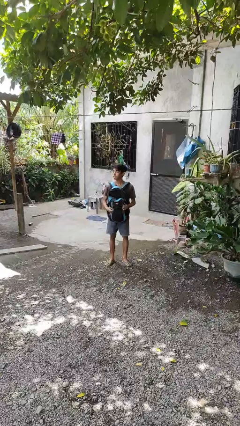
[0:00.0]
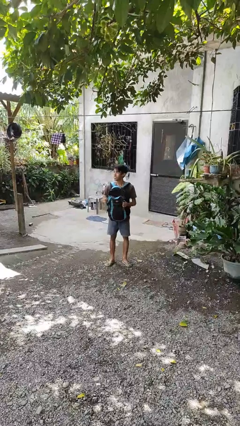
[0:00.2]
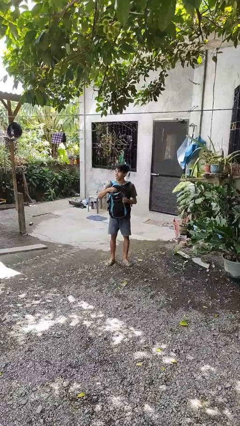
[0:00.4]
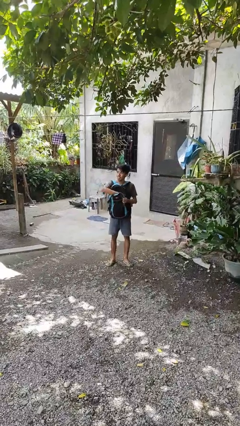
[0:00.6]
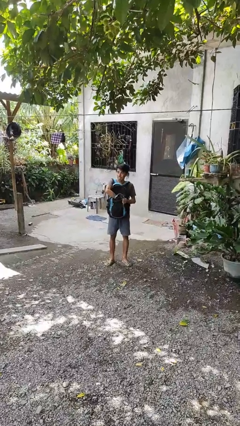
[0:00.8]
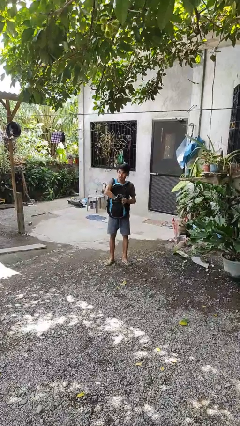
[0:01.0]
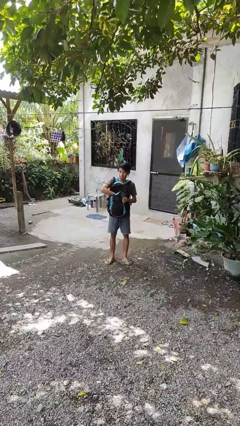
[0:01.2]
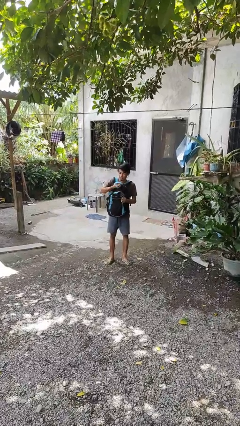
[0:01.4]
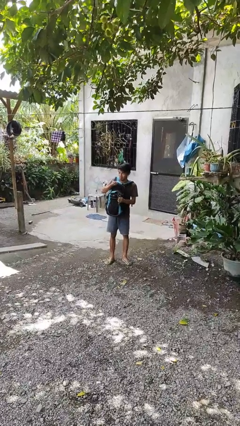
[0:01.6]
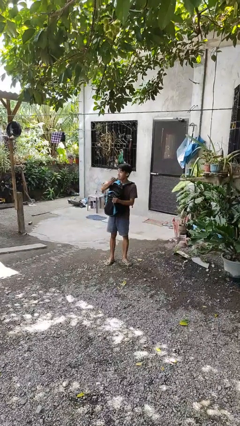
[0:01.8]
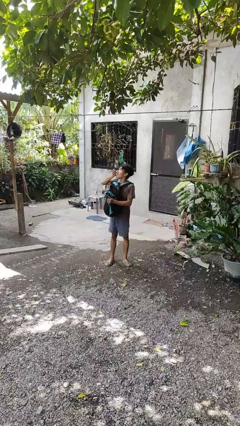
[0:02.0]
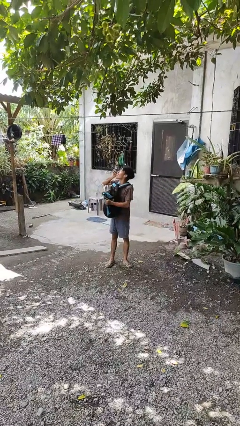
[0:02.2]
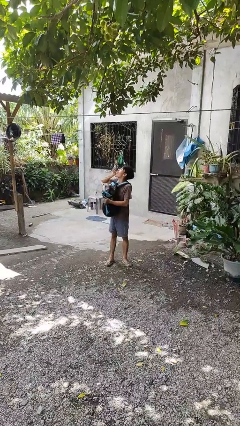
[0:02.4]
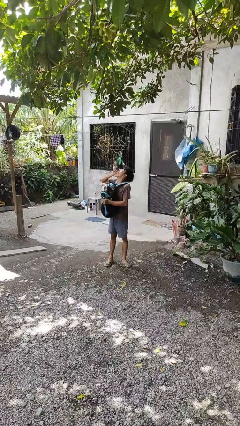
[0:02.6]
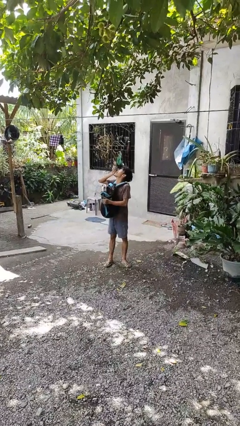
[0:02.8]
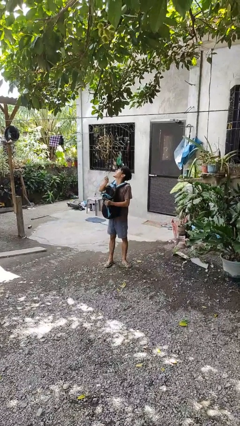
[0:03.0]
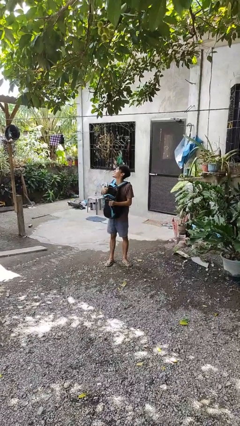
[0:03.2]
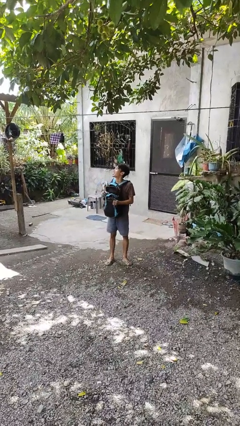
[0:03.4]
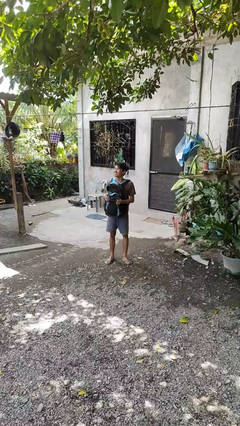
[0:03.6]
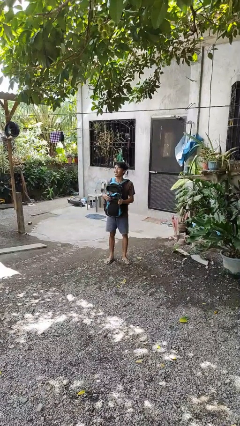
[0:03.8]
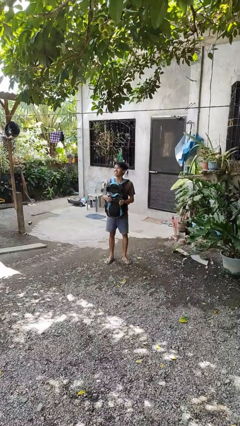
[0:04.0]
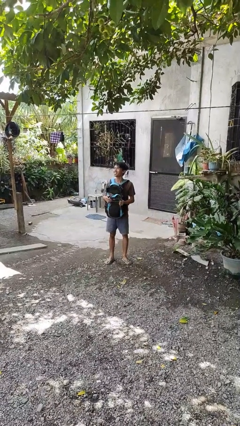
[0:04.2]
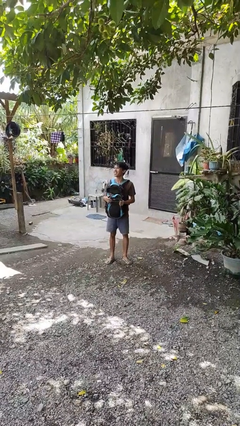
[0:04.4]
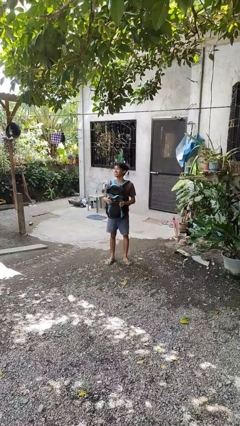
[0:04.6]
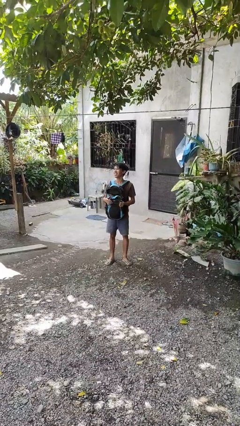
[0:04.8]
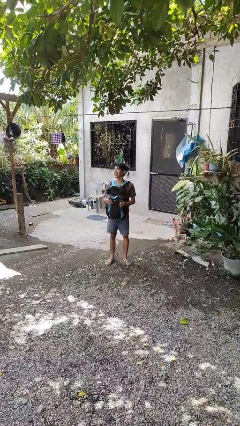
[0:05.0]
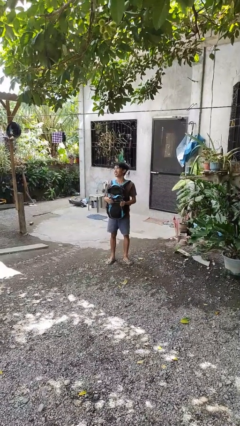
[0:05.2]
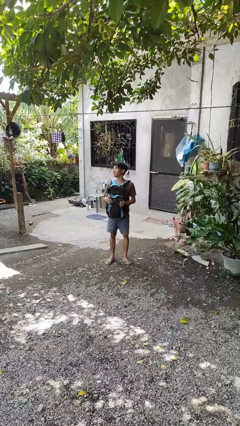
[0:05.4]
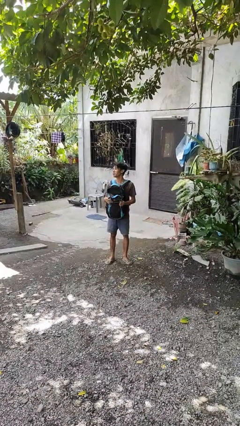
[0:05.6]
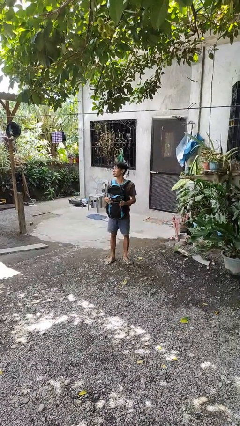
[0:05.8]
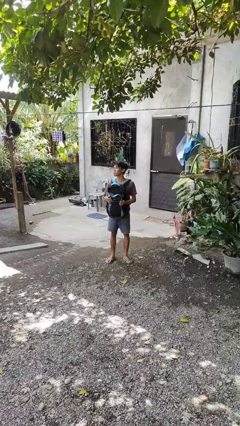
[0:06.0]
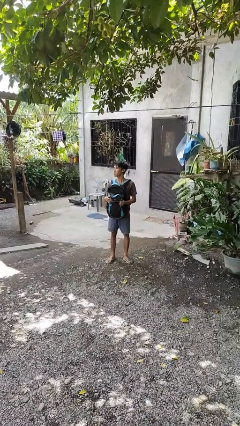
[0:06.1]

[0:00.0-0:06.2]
person eats snack from bag

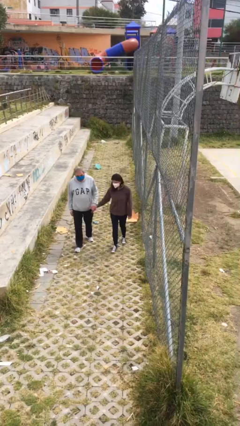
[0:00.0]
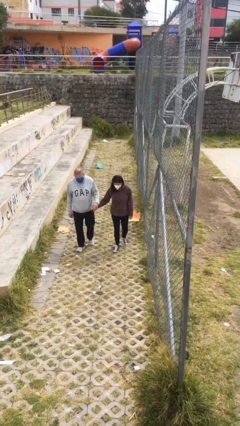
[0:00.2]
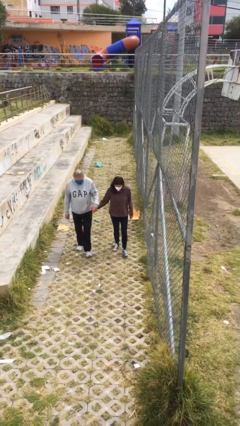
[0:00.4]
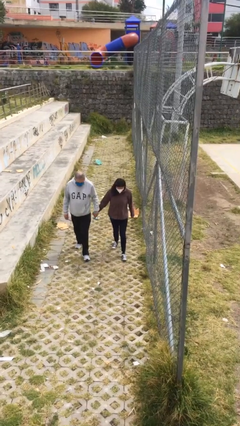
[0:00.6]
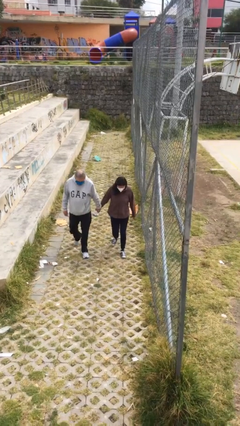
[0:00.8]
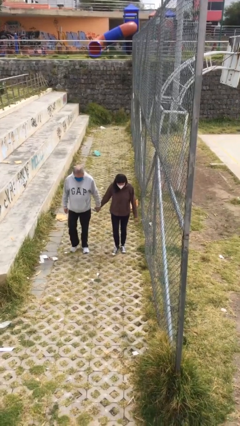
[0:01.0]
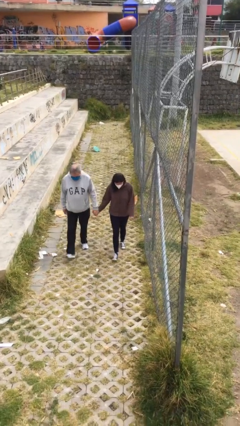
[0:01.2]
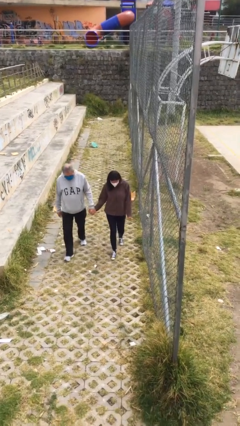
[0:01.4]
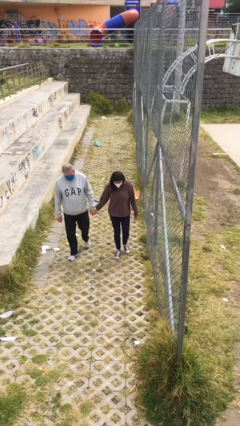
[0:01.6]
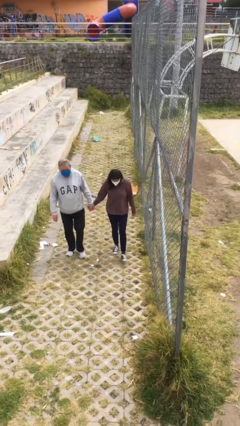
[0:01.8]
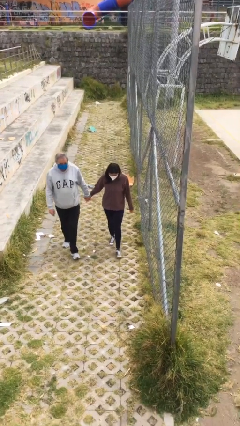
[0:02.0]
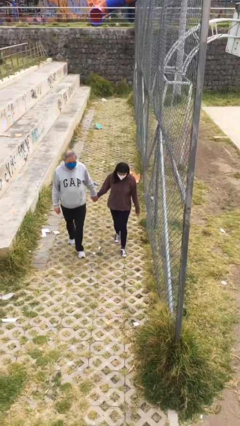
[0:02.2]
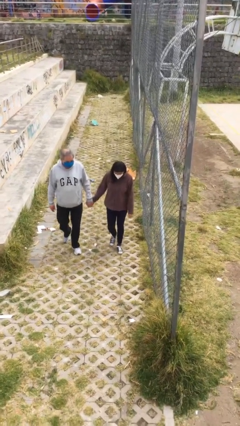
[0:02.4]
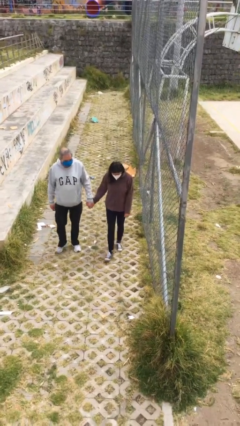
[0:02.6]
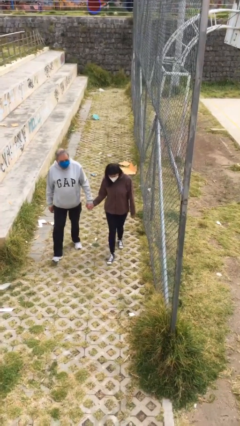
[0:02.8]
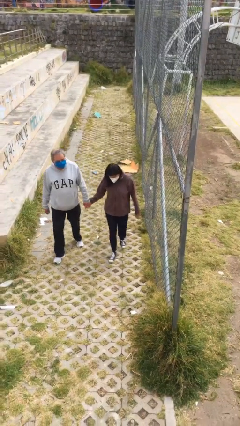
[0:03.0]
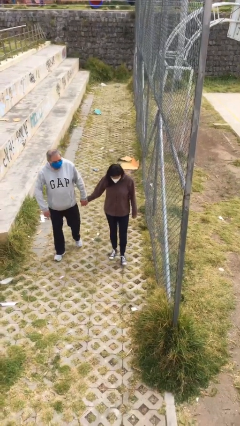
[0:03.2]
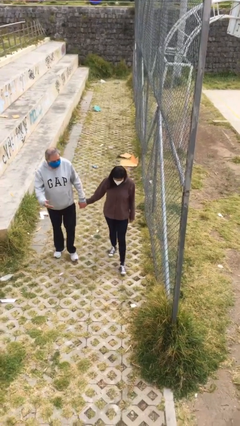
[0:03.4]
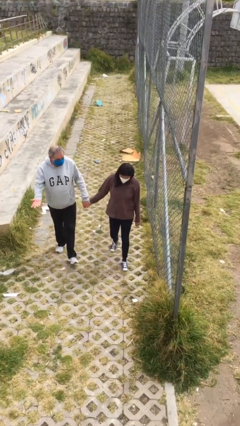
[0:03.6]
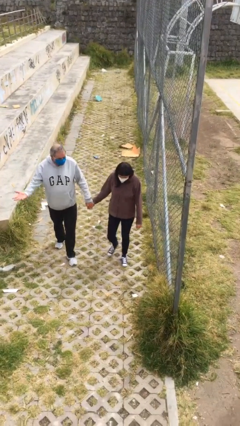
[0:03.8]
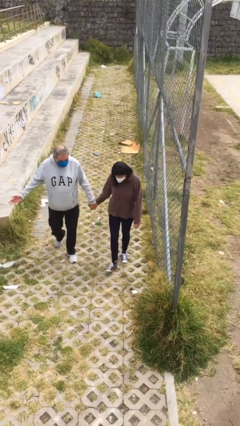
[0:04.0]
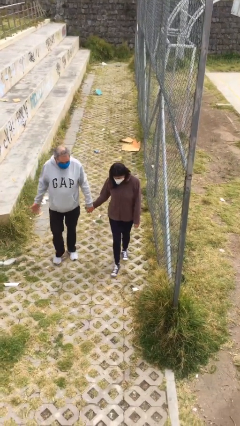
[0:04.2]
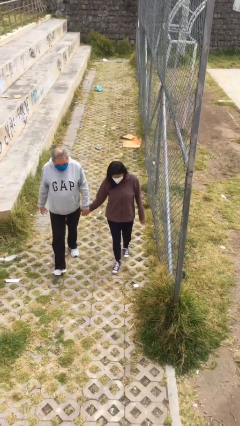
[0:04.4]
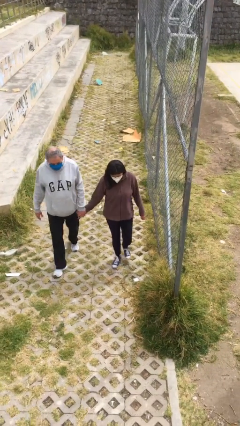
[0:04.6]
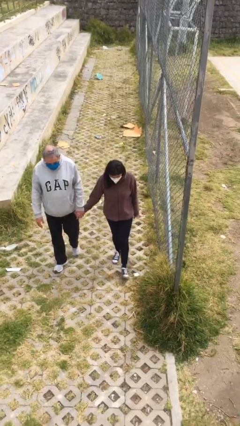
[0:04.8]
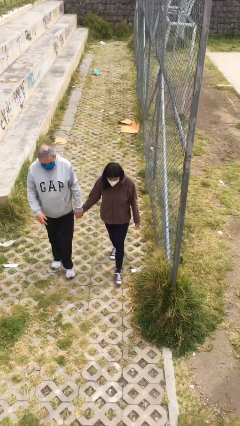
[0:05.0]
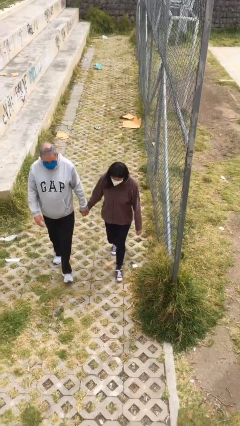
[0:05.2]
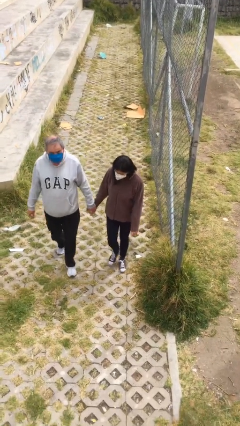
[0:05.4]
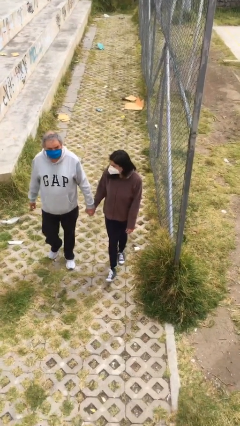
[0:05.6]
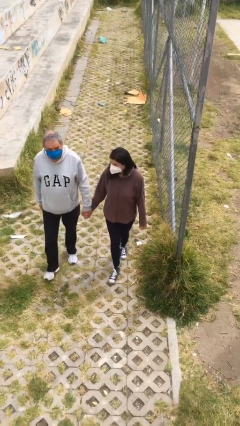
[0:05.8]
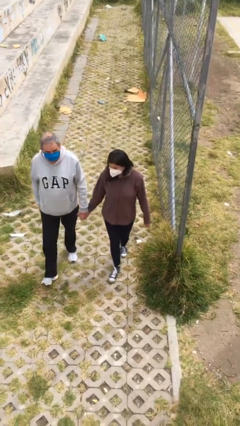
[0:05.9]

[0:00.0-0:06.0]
person holds hand

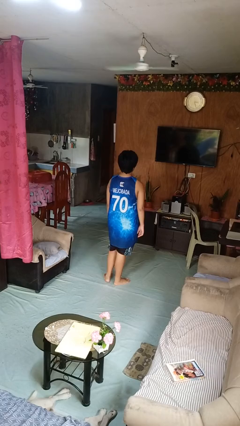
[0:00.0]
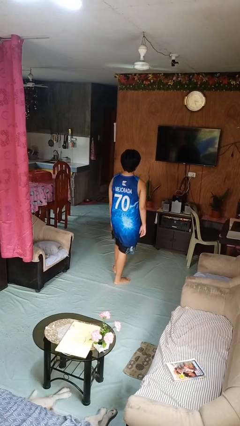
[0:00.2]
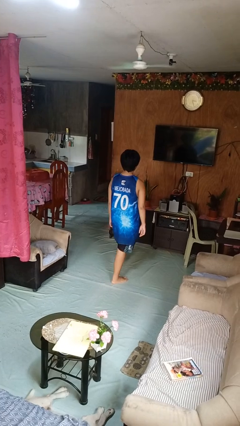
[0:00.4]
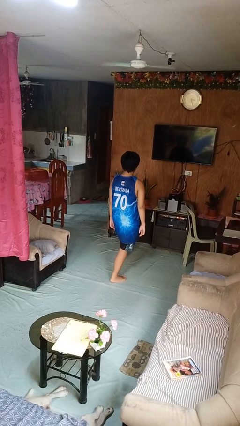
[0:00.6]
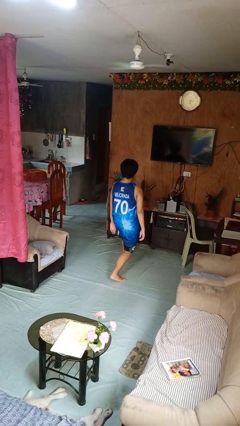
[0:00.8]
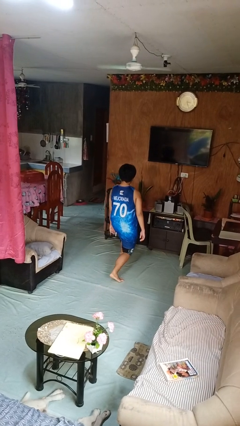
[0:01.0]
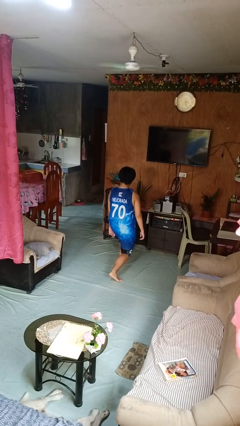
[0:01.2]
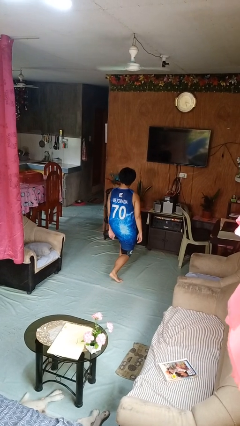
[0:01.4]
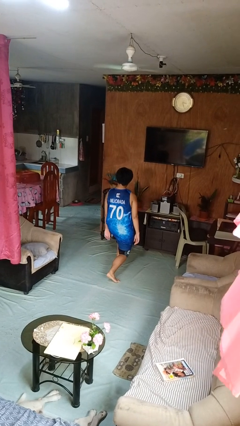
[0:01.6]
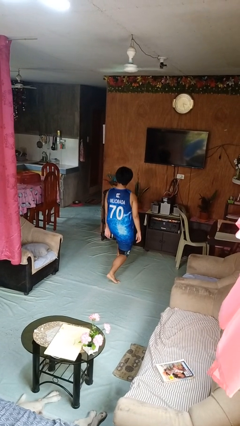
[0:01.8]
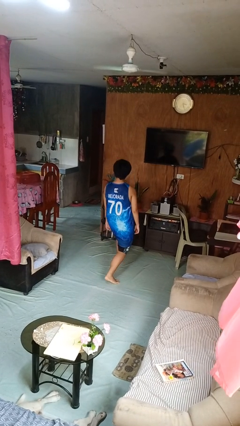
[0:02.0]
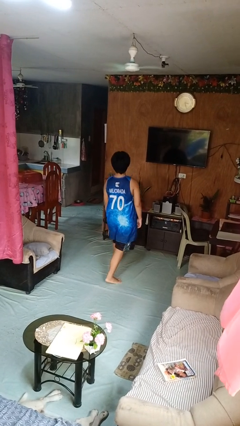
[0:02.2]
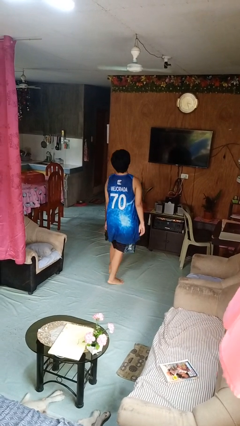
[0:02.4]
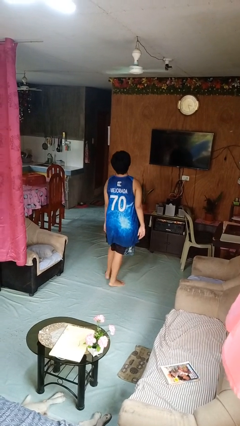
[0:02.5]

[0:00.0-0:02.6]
person exercises with lunges

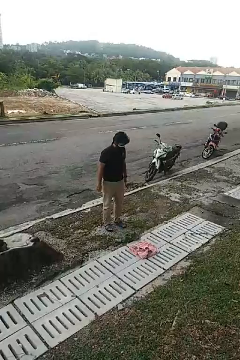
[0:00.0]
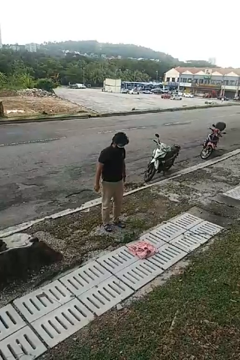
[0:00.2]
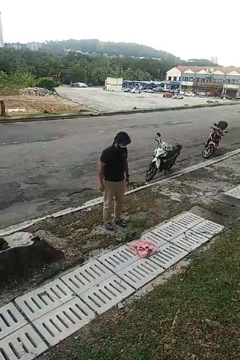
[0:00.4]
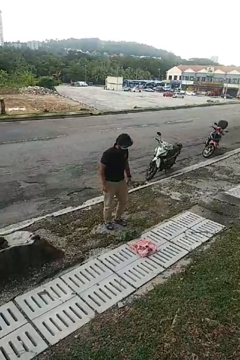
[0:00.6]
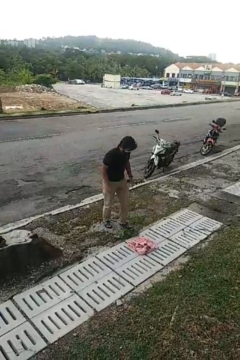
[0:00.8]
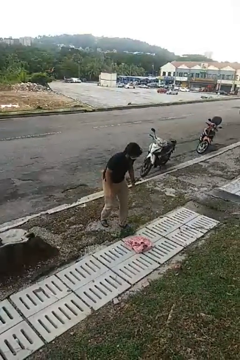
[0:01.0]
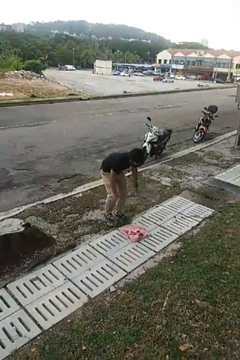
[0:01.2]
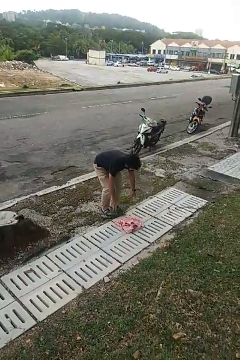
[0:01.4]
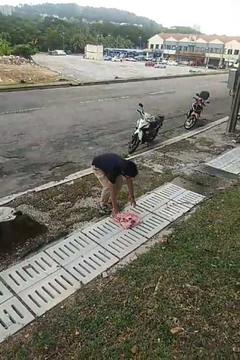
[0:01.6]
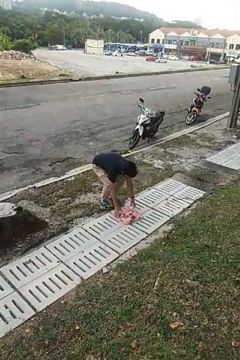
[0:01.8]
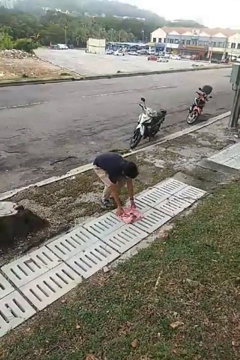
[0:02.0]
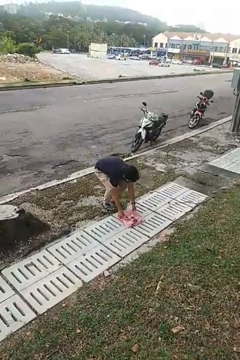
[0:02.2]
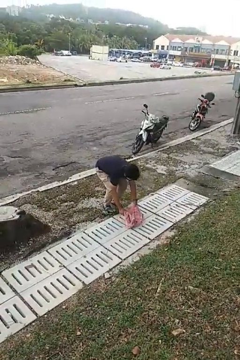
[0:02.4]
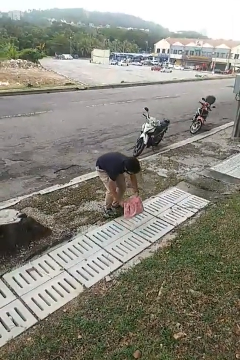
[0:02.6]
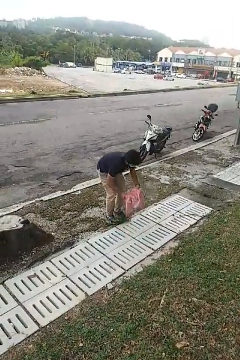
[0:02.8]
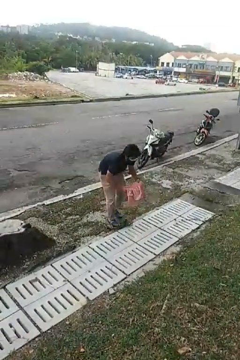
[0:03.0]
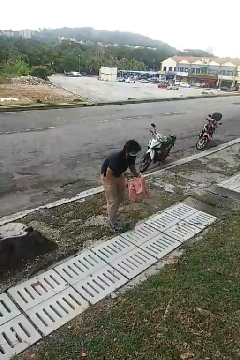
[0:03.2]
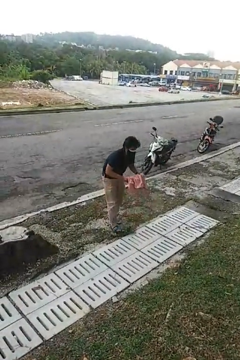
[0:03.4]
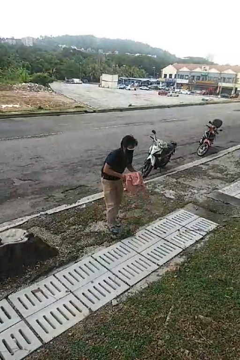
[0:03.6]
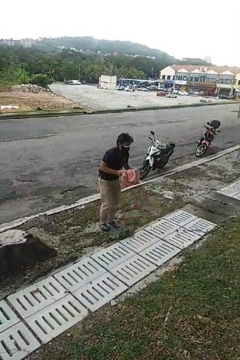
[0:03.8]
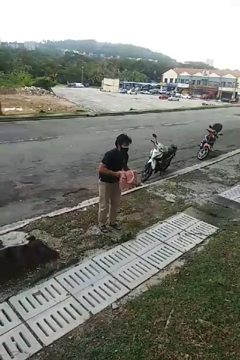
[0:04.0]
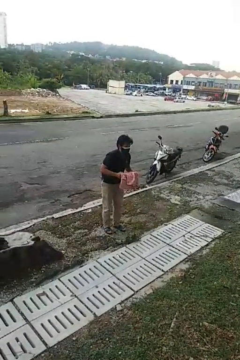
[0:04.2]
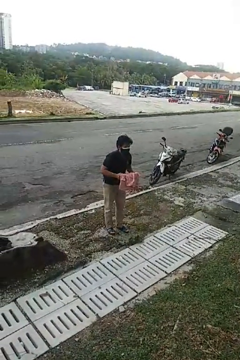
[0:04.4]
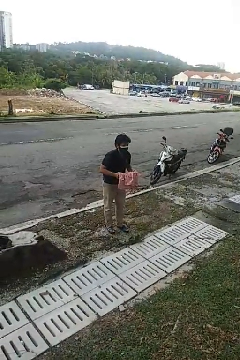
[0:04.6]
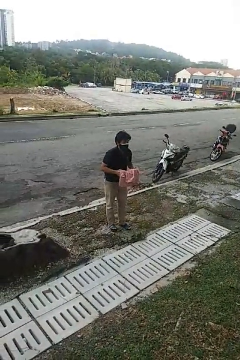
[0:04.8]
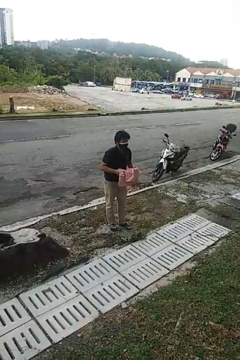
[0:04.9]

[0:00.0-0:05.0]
person picks up object from floor
